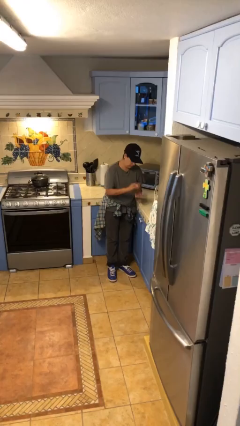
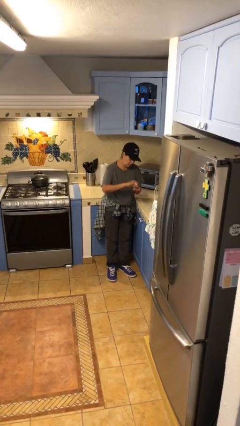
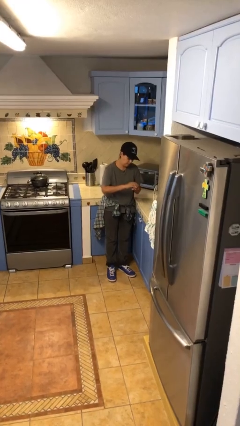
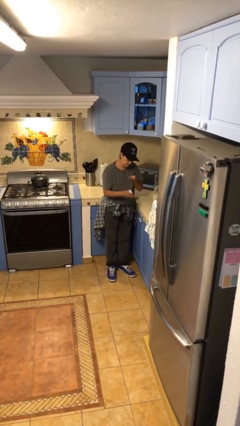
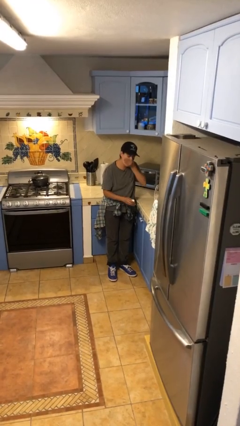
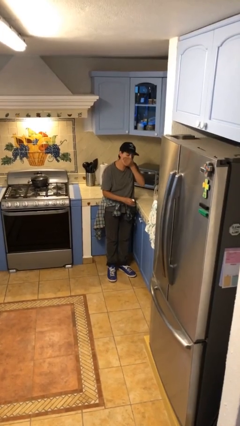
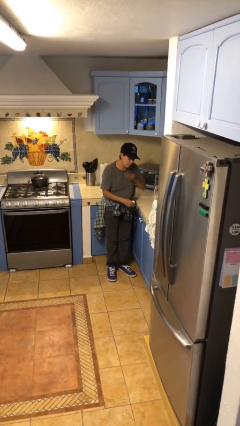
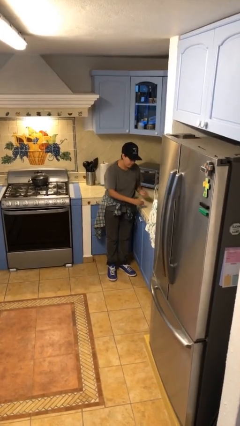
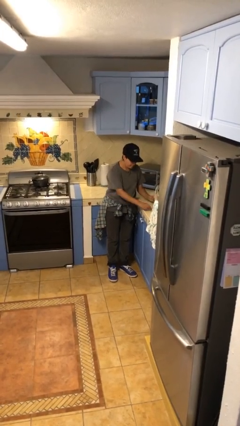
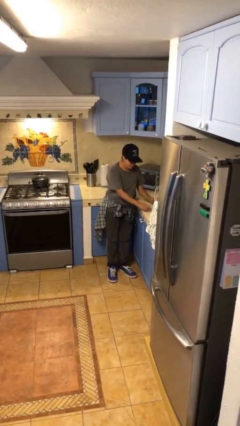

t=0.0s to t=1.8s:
person takes medicine pills

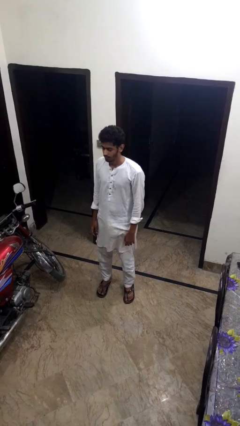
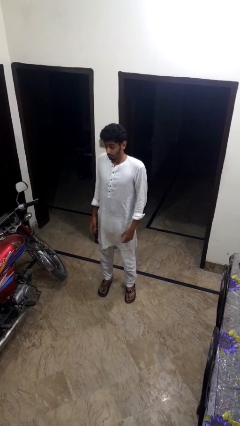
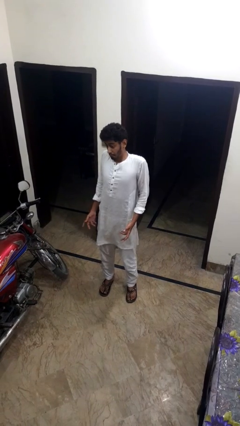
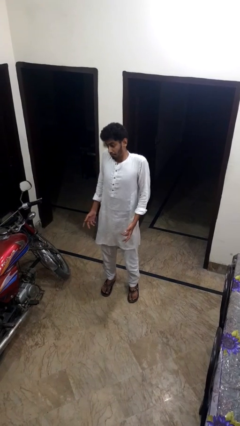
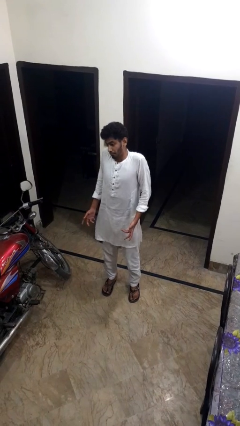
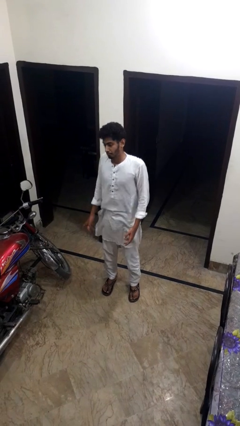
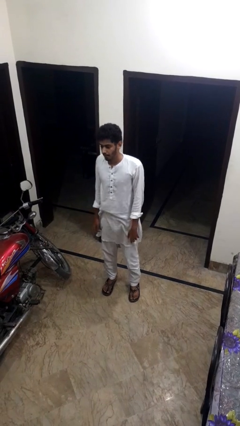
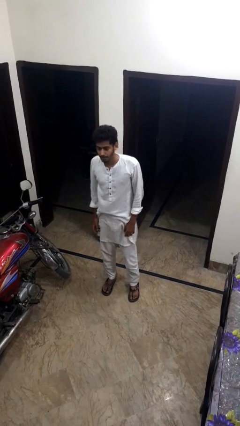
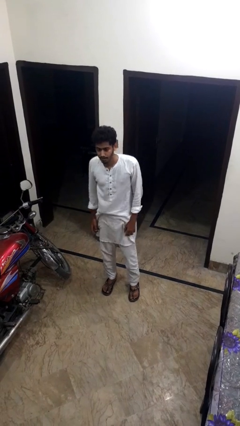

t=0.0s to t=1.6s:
person shrugs

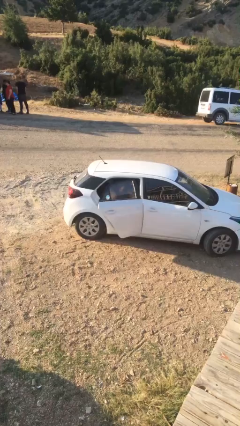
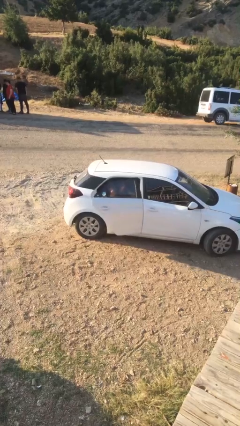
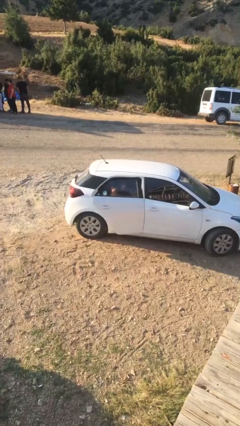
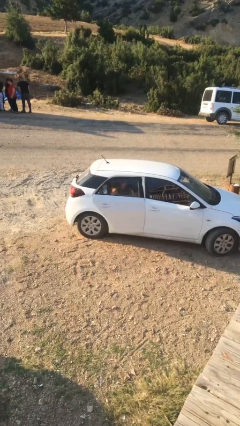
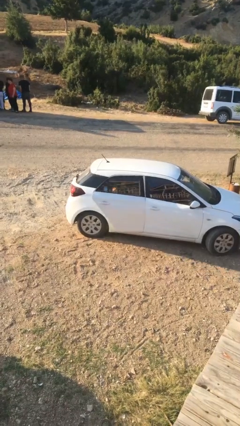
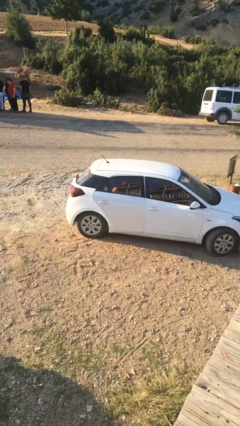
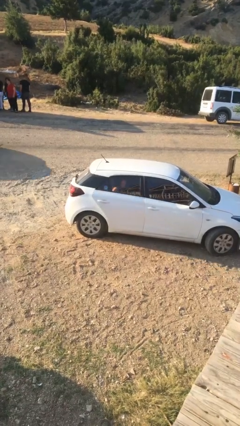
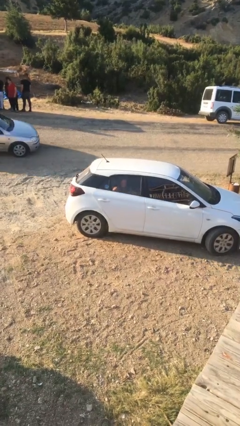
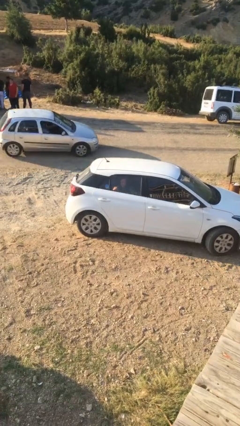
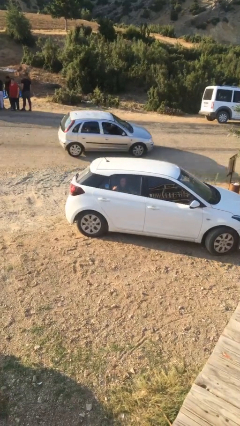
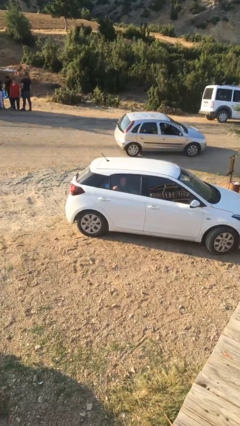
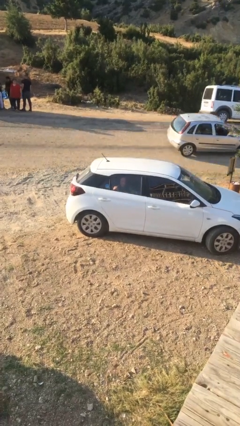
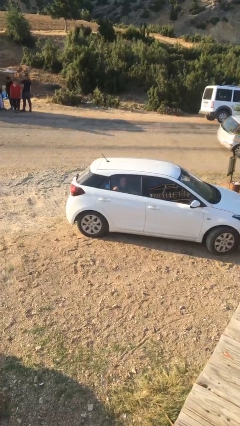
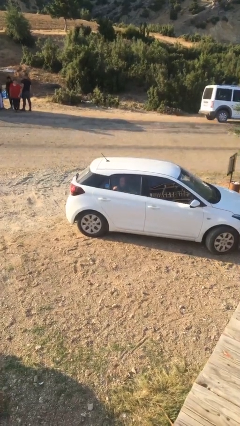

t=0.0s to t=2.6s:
person closes car door

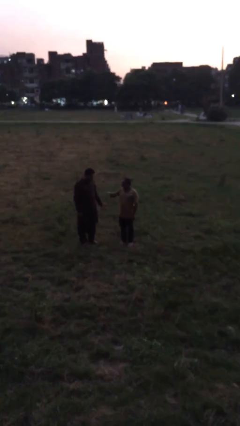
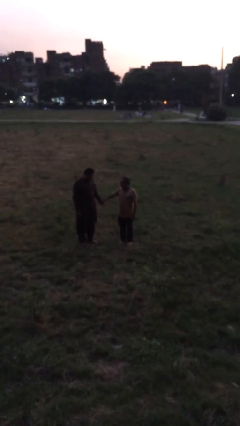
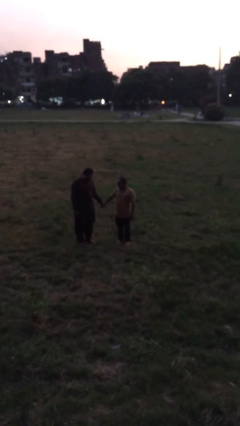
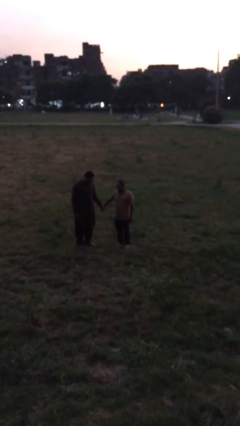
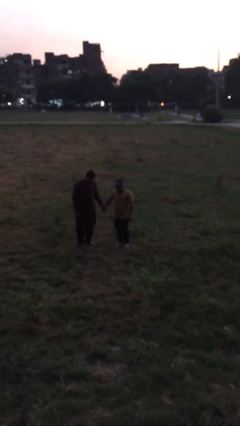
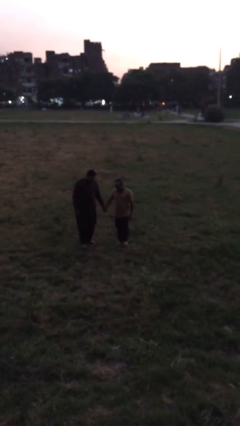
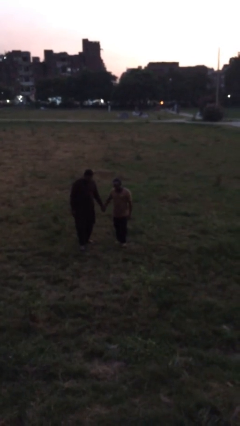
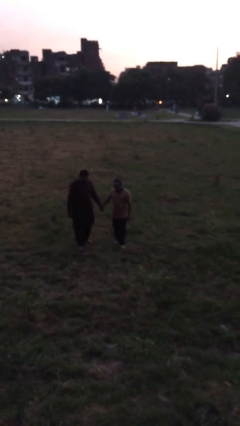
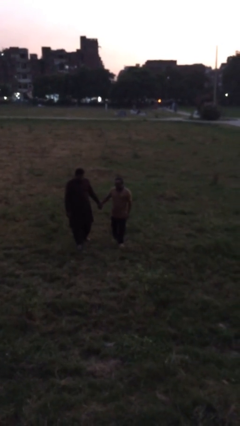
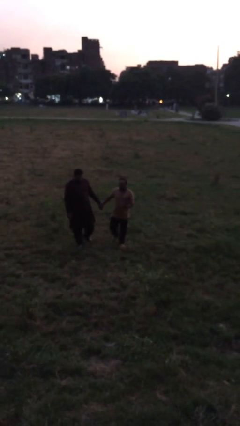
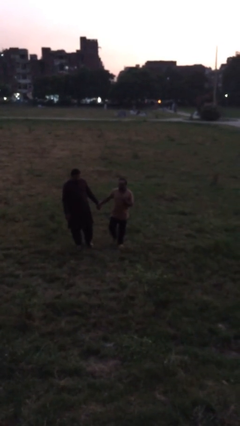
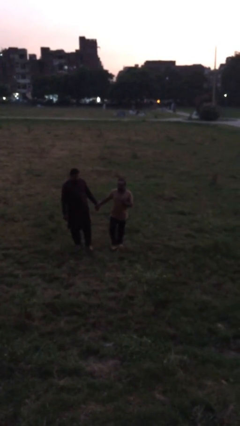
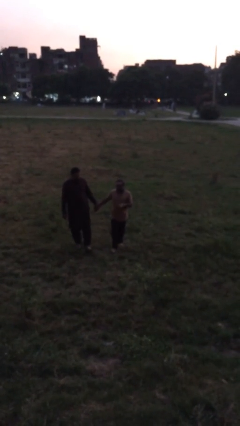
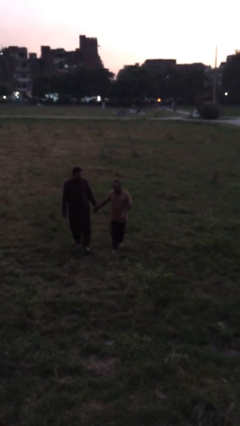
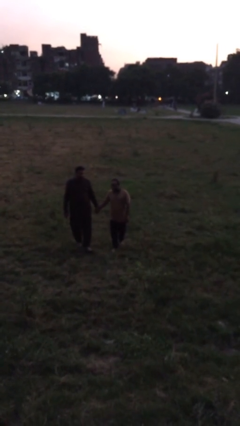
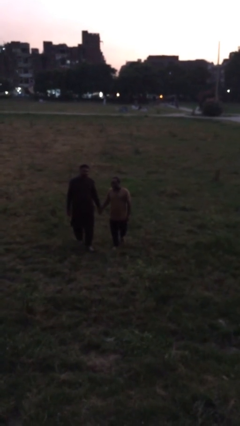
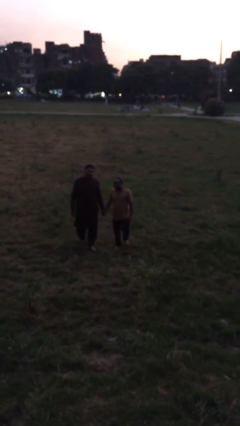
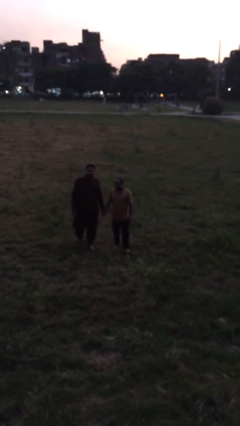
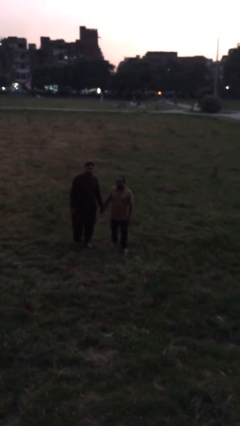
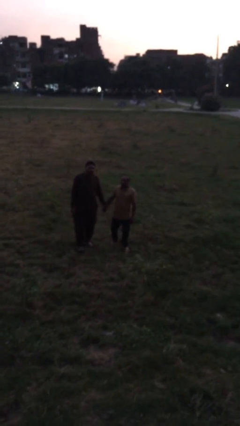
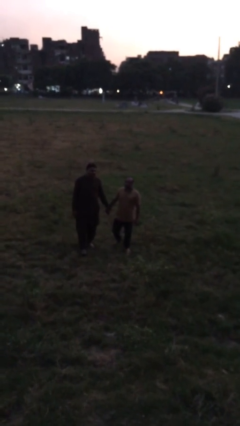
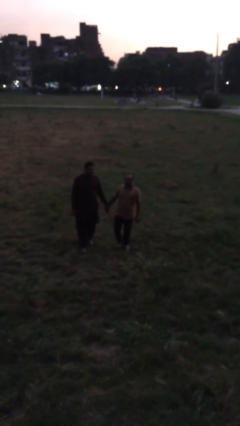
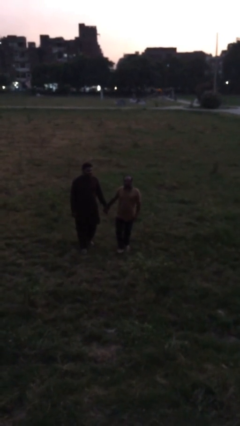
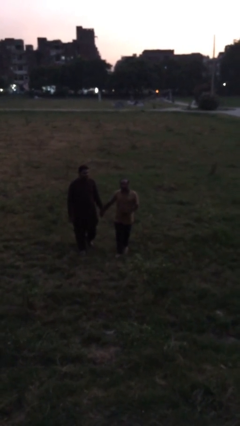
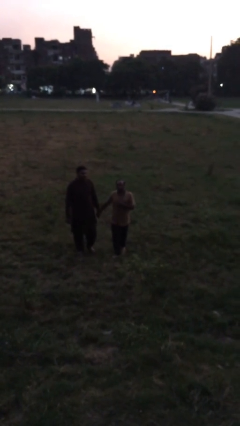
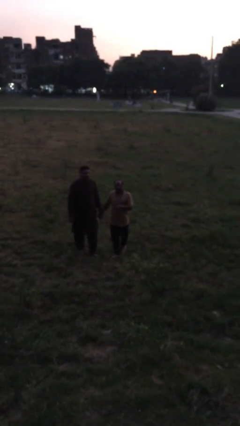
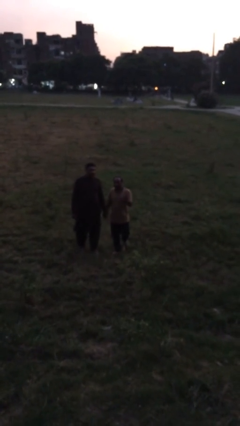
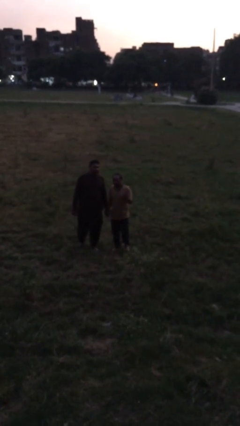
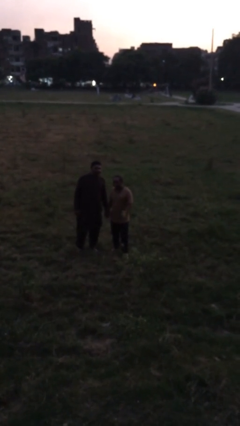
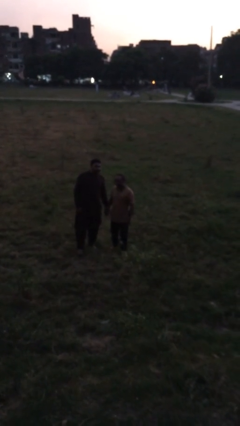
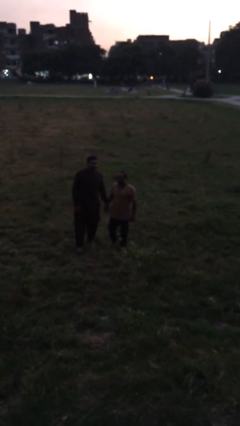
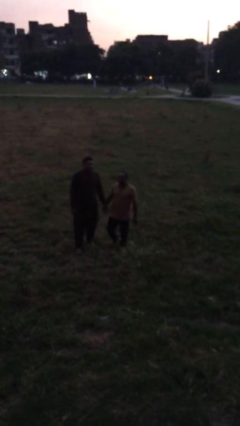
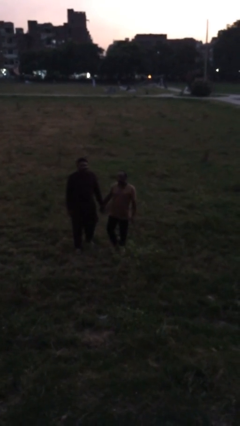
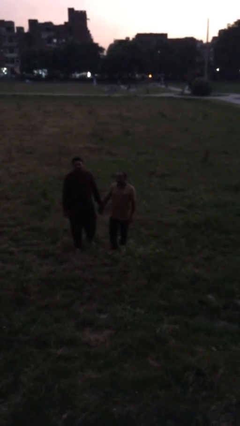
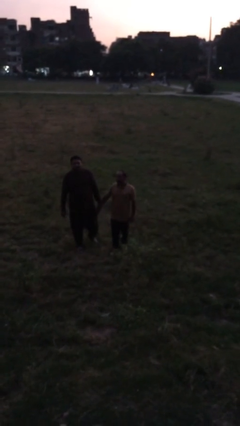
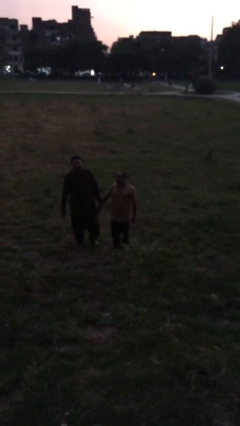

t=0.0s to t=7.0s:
person holds hand

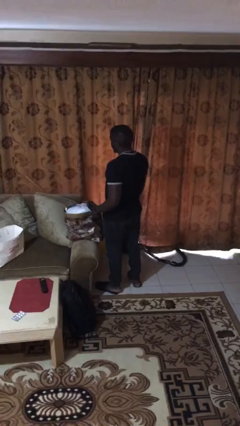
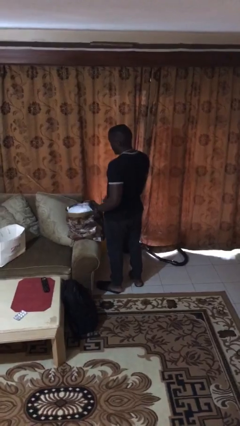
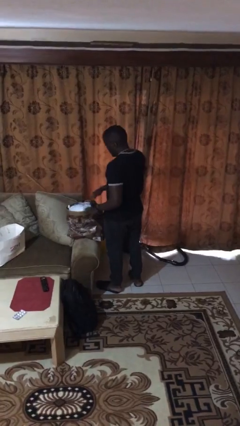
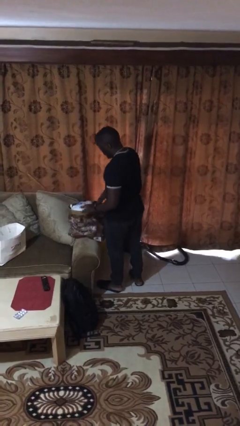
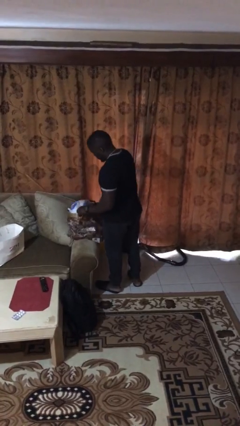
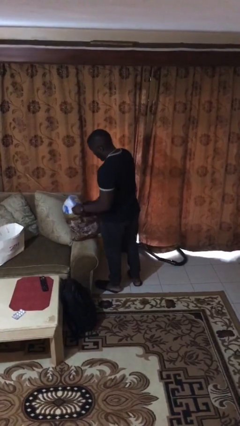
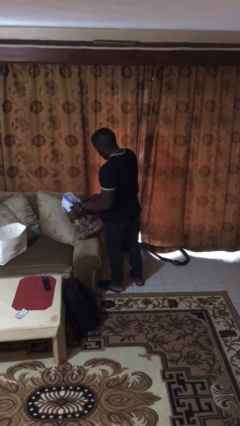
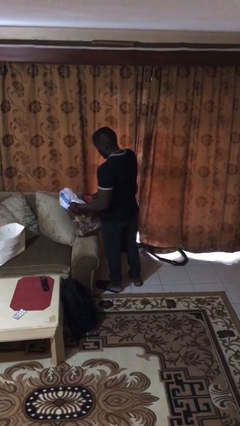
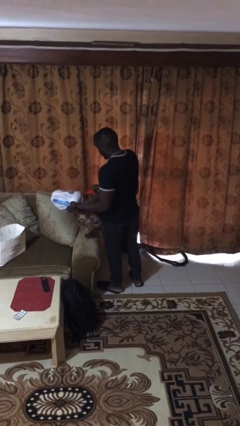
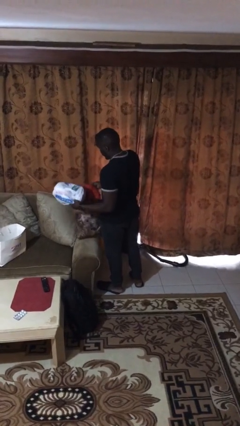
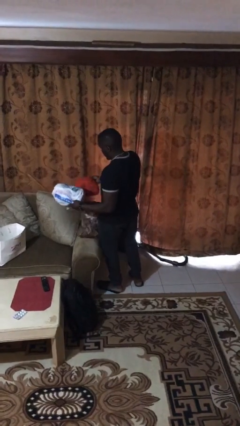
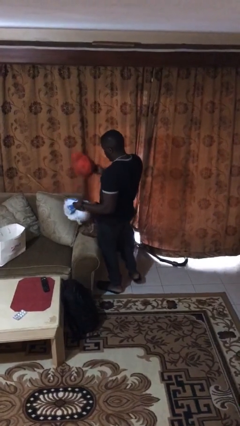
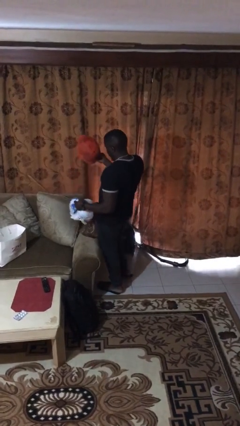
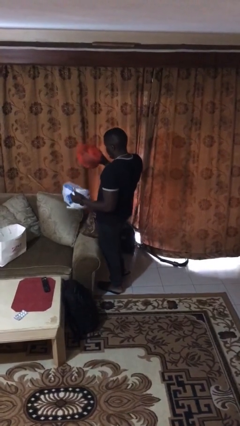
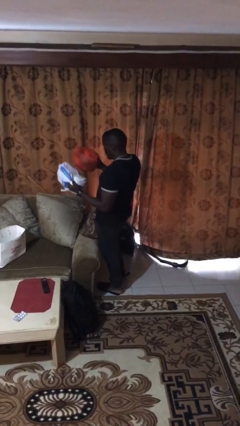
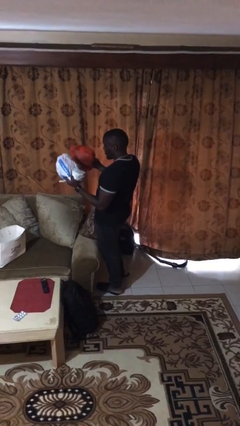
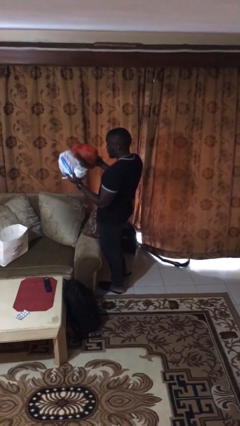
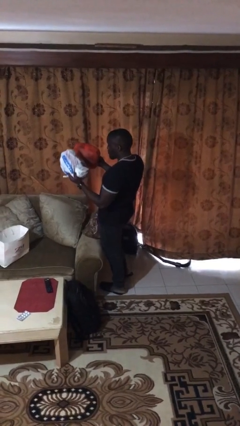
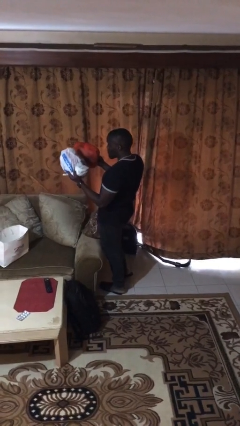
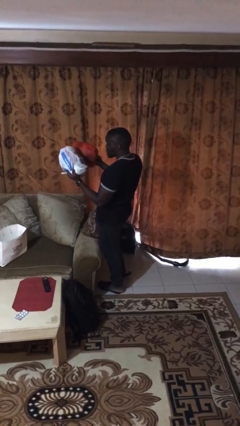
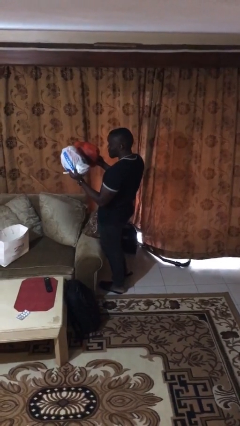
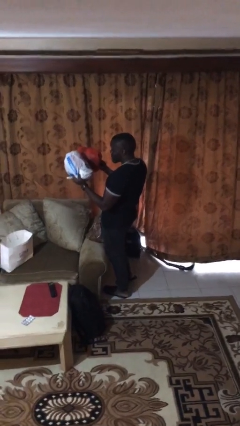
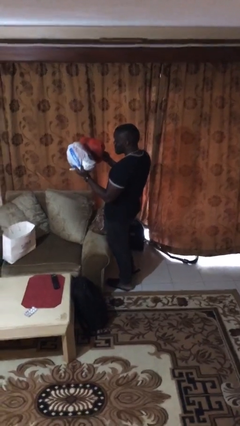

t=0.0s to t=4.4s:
person takes object from bag
